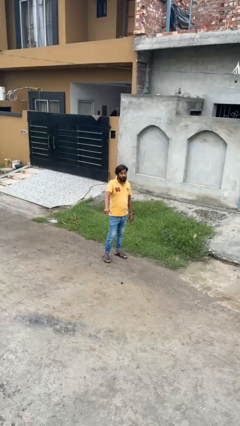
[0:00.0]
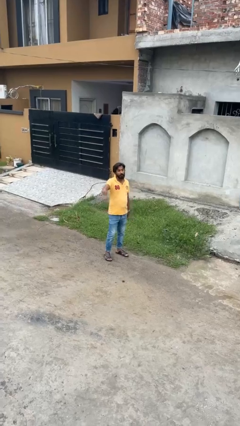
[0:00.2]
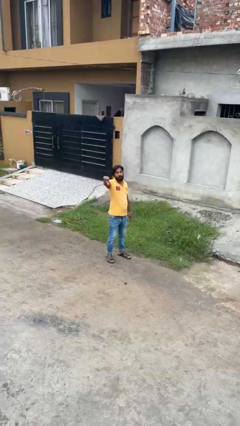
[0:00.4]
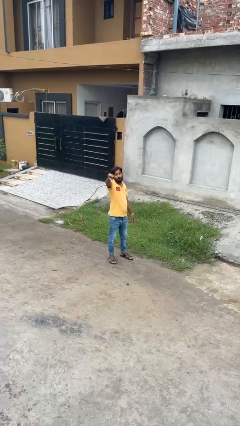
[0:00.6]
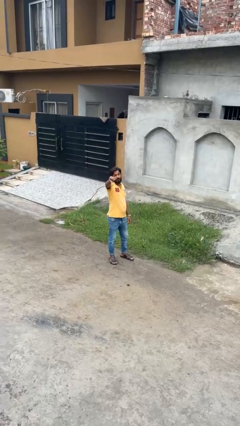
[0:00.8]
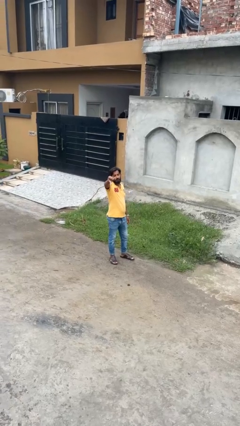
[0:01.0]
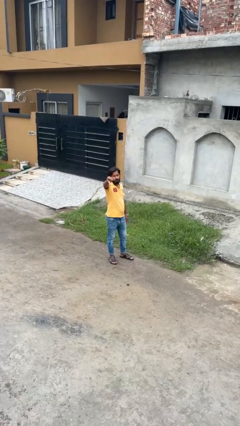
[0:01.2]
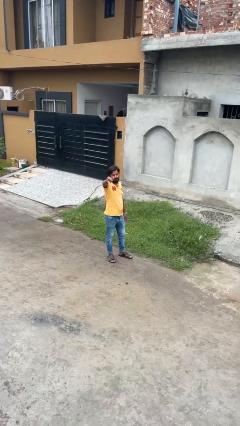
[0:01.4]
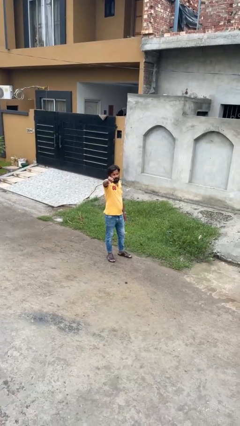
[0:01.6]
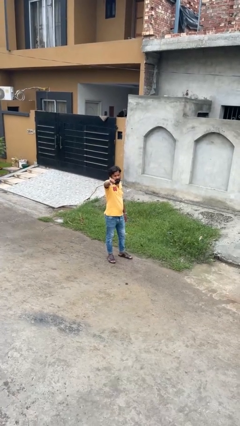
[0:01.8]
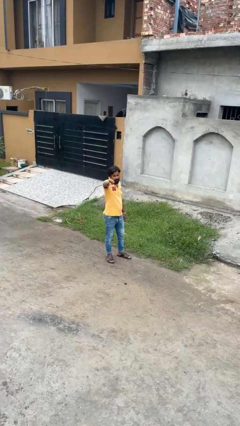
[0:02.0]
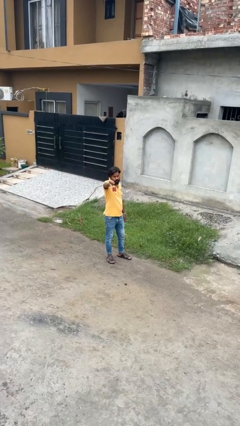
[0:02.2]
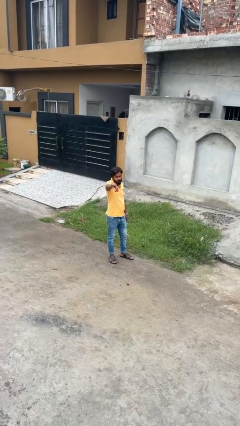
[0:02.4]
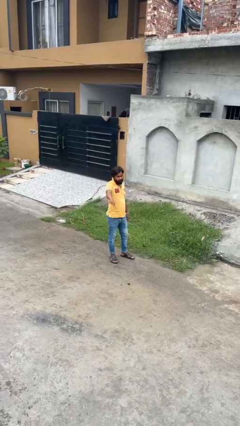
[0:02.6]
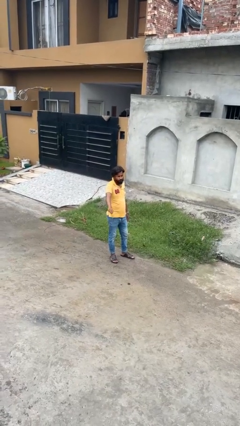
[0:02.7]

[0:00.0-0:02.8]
person gestures thumbs down

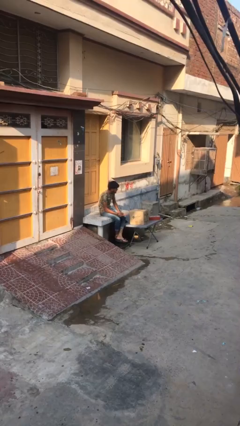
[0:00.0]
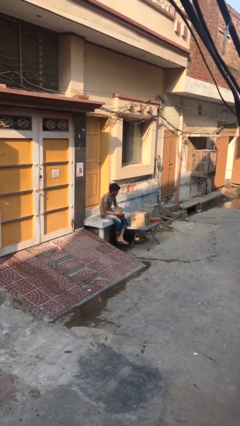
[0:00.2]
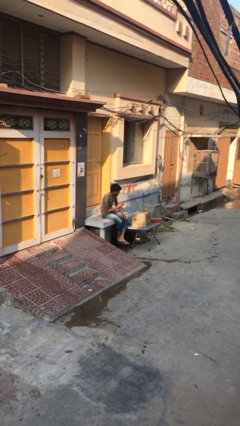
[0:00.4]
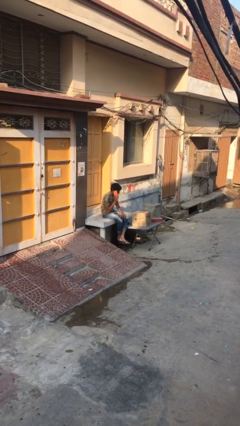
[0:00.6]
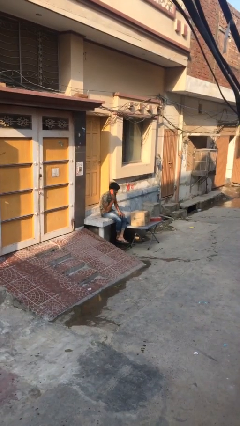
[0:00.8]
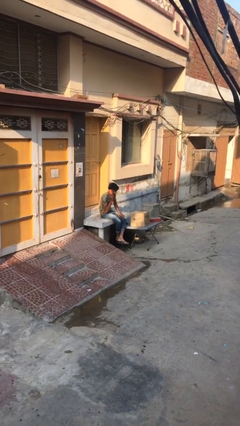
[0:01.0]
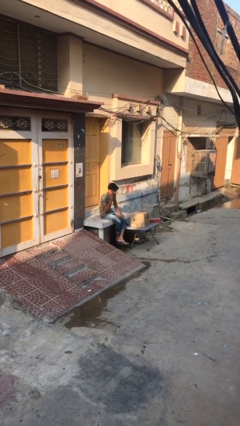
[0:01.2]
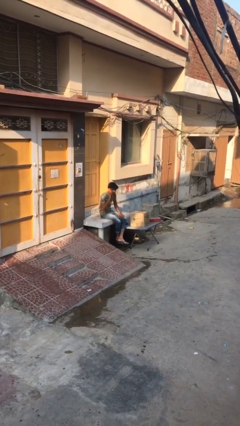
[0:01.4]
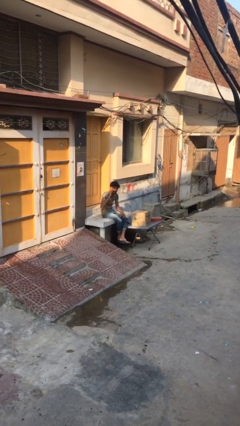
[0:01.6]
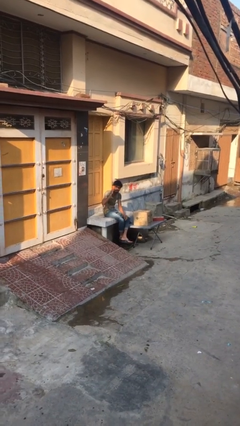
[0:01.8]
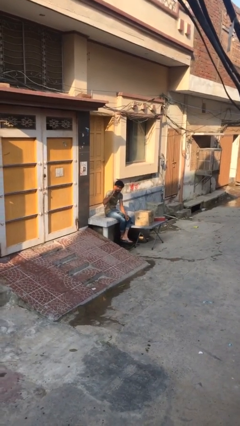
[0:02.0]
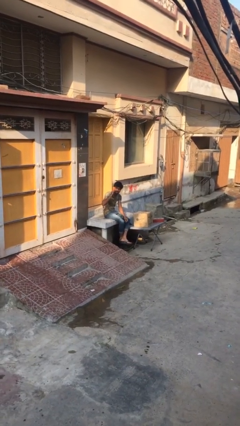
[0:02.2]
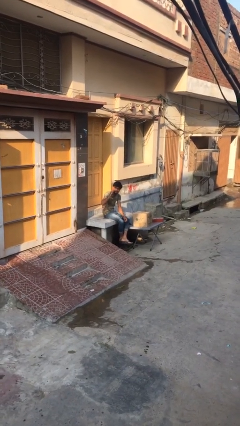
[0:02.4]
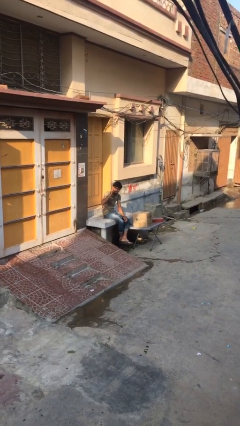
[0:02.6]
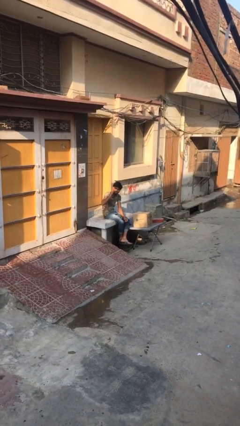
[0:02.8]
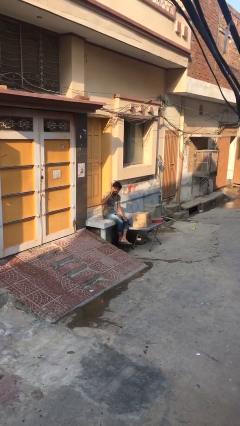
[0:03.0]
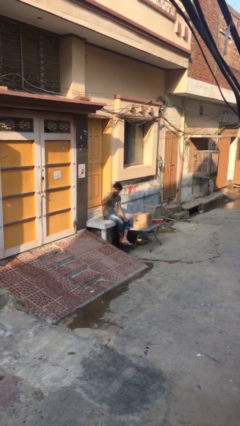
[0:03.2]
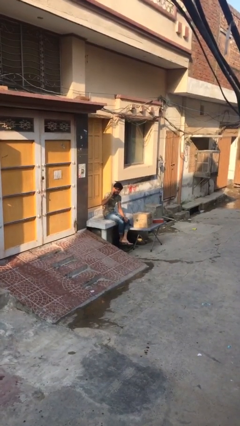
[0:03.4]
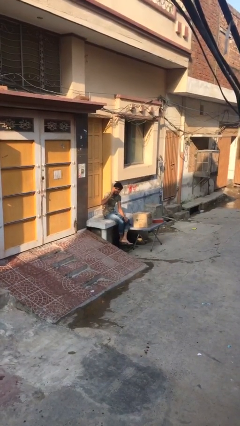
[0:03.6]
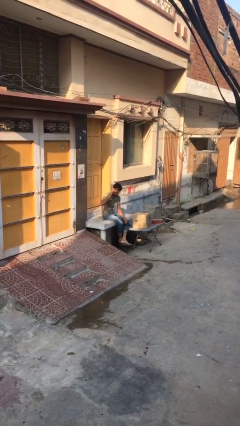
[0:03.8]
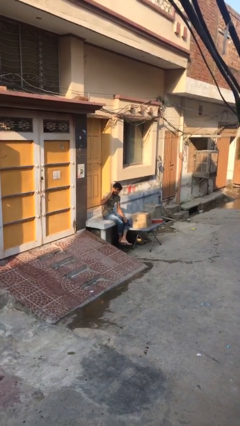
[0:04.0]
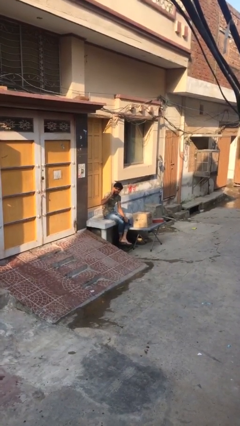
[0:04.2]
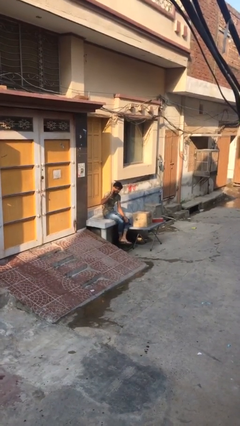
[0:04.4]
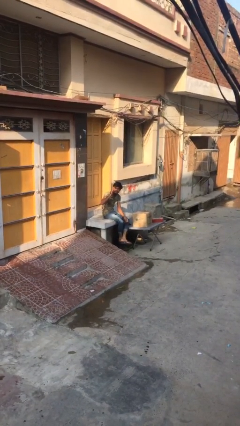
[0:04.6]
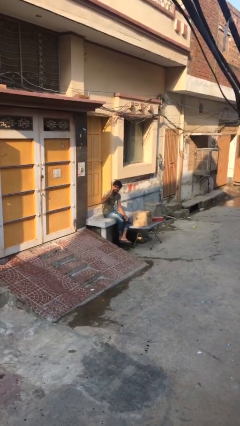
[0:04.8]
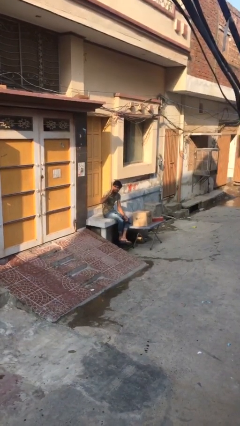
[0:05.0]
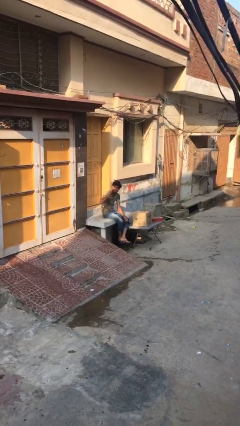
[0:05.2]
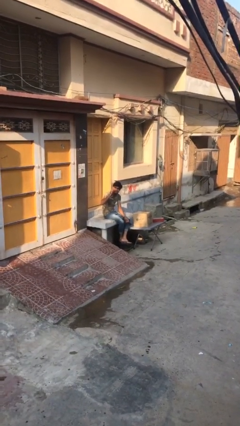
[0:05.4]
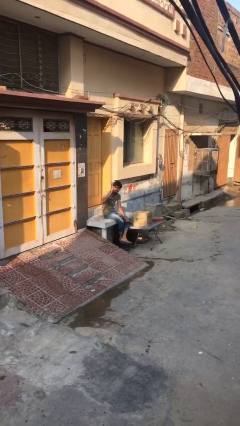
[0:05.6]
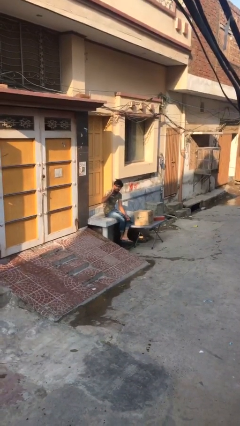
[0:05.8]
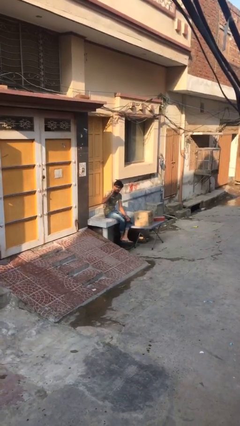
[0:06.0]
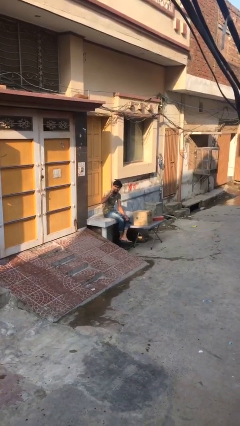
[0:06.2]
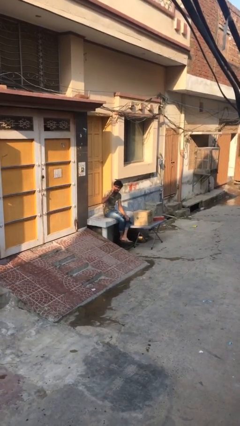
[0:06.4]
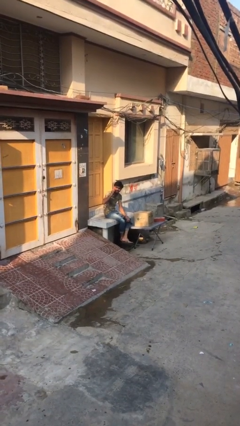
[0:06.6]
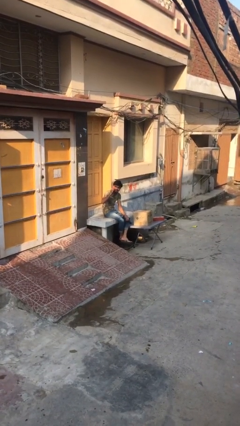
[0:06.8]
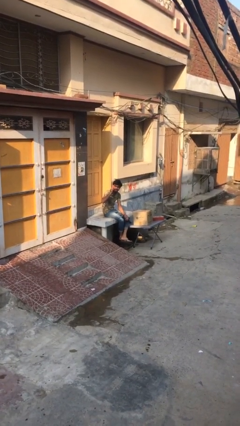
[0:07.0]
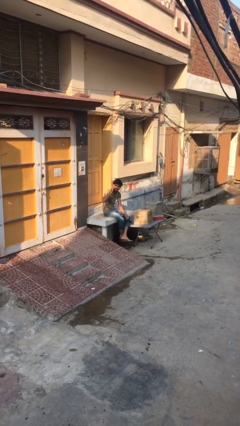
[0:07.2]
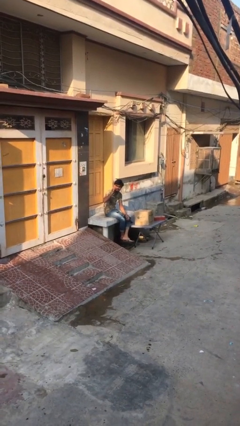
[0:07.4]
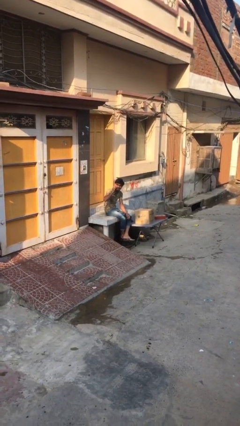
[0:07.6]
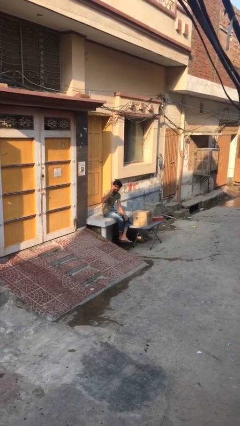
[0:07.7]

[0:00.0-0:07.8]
person talks on phone

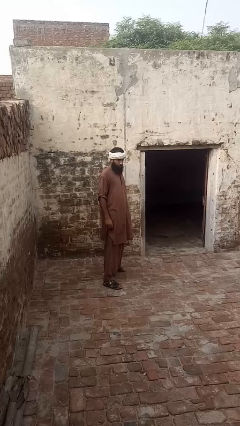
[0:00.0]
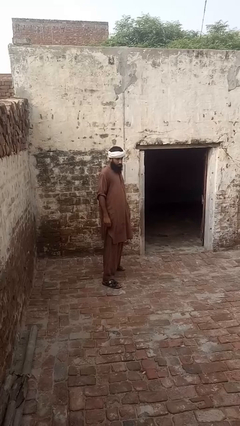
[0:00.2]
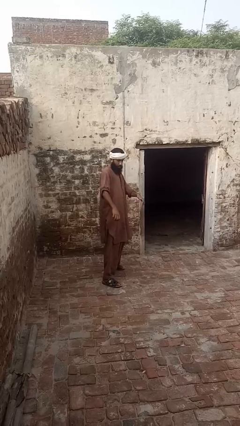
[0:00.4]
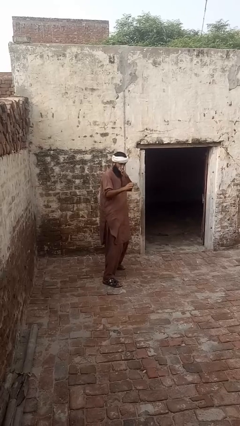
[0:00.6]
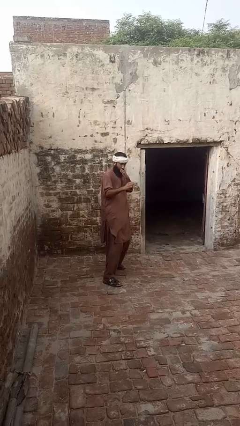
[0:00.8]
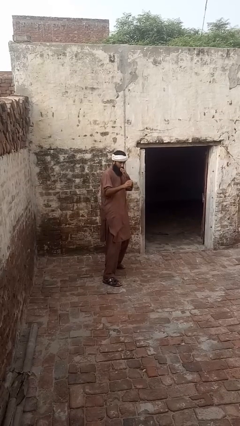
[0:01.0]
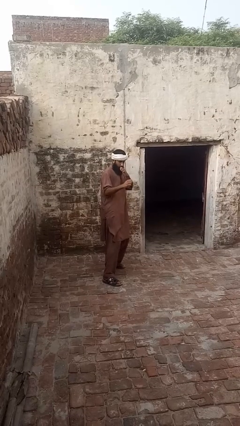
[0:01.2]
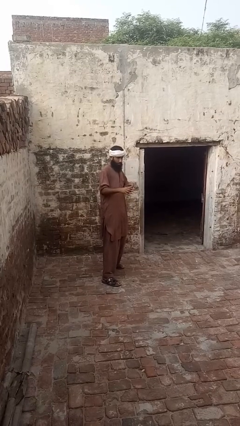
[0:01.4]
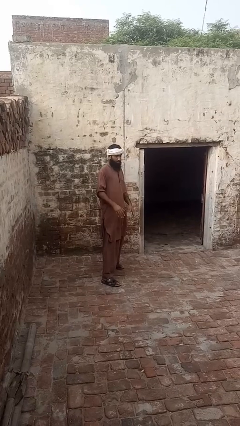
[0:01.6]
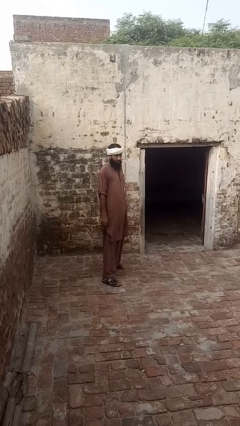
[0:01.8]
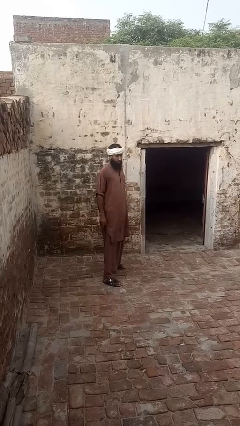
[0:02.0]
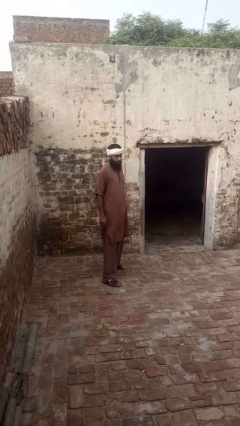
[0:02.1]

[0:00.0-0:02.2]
person karate chop

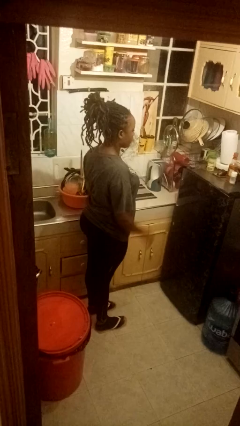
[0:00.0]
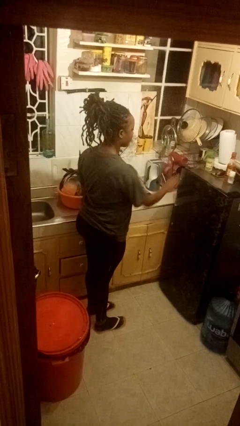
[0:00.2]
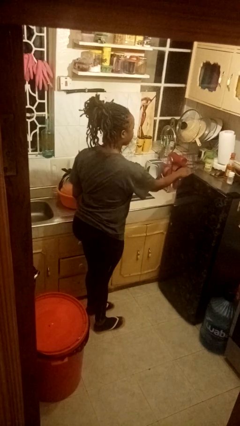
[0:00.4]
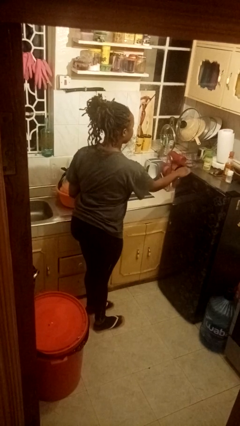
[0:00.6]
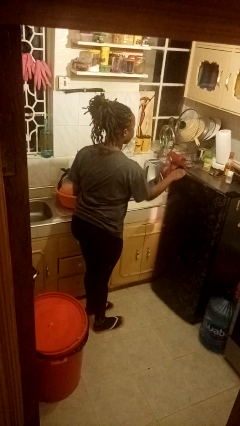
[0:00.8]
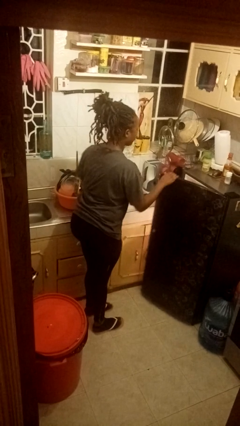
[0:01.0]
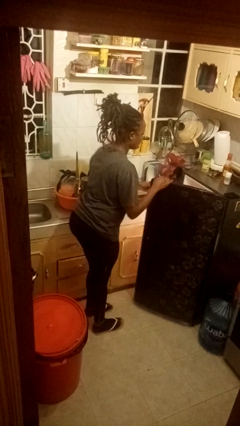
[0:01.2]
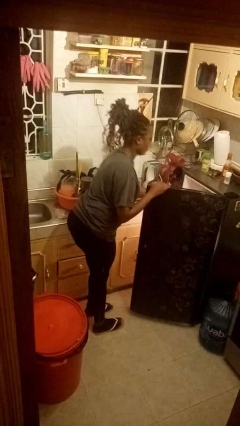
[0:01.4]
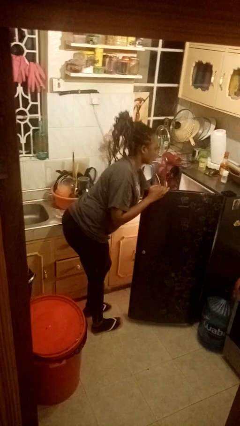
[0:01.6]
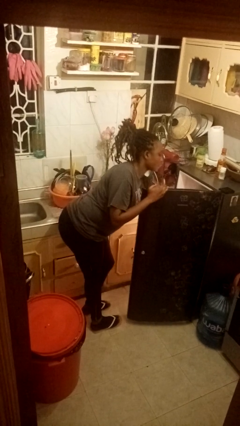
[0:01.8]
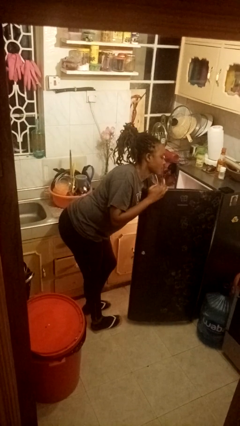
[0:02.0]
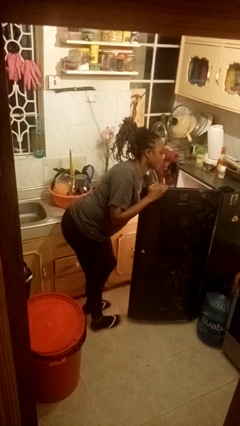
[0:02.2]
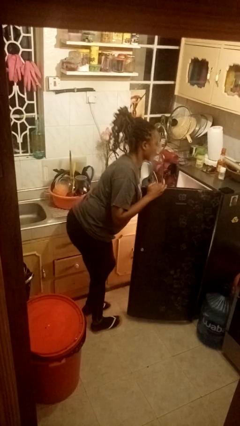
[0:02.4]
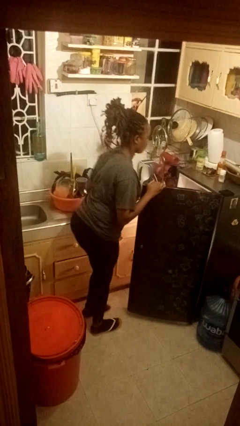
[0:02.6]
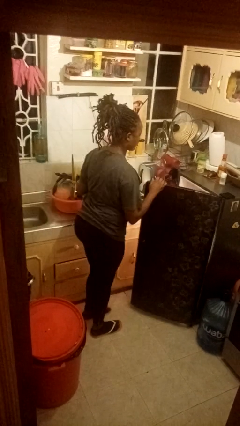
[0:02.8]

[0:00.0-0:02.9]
person takes object from refrigerator

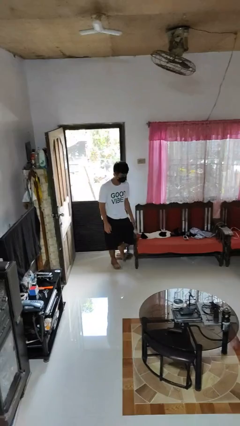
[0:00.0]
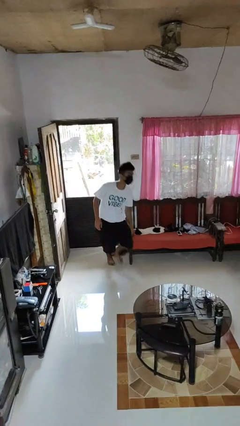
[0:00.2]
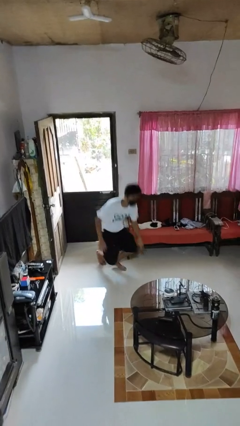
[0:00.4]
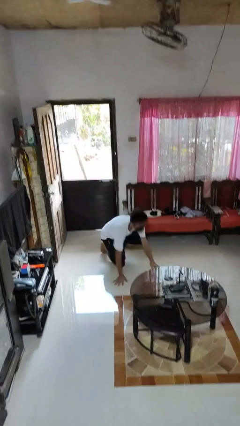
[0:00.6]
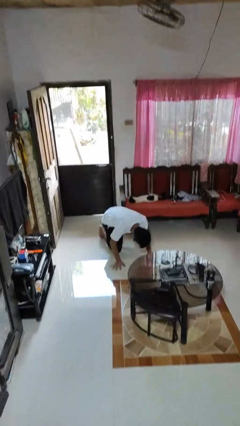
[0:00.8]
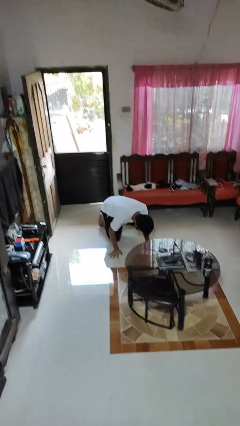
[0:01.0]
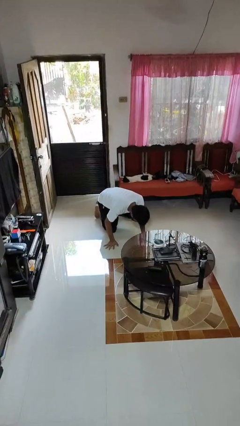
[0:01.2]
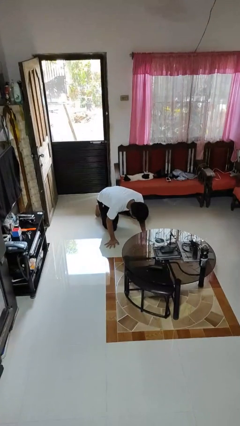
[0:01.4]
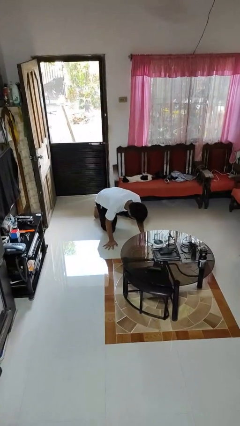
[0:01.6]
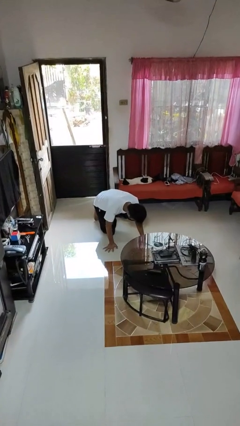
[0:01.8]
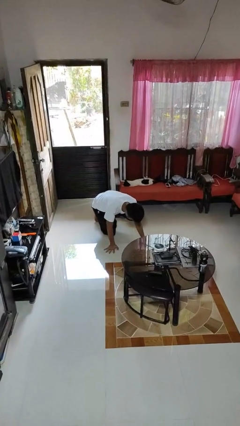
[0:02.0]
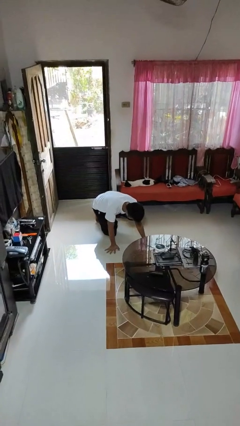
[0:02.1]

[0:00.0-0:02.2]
person trips on object on floor

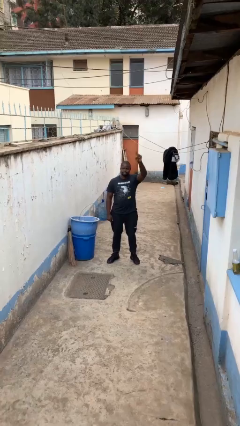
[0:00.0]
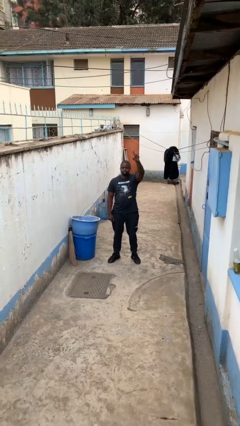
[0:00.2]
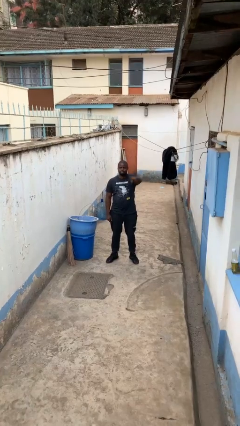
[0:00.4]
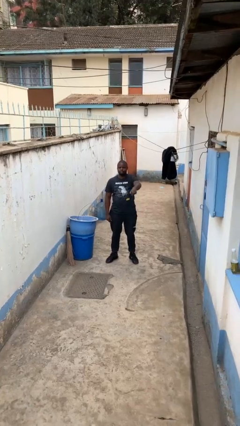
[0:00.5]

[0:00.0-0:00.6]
person gestures swipe down
